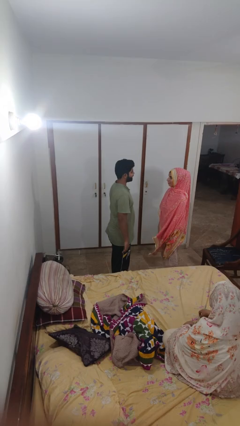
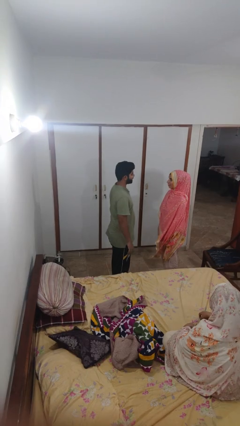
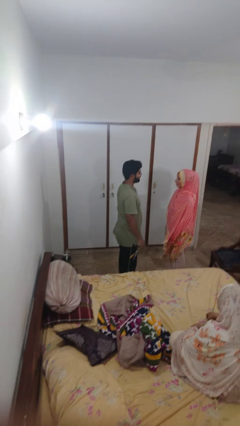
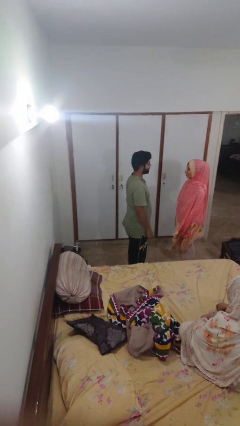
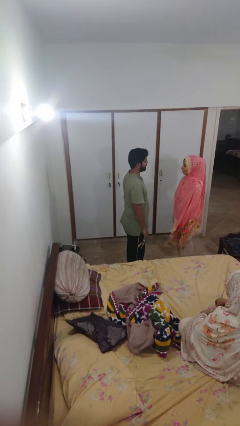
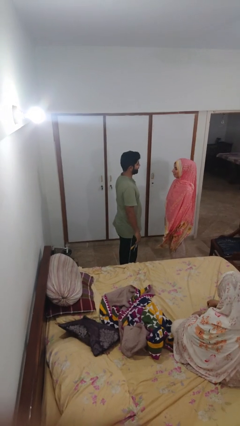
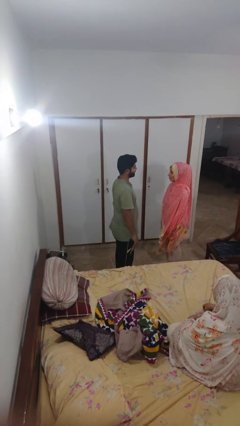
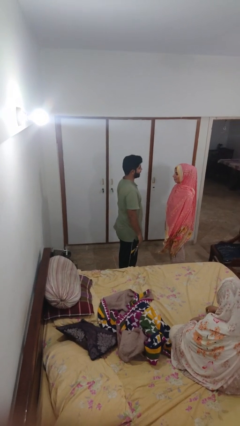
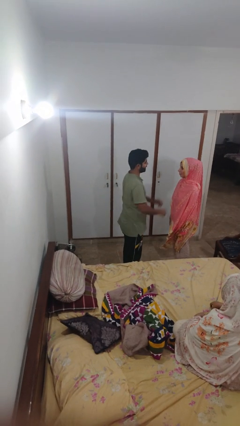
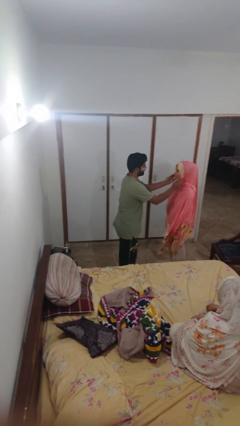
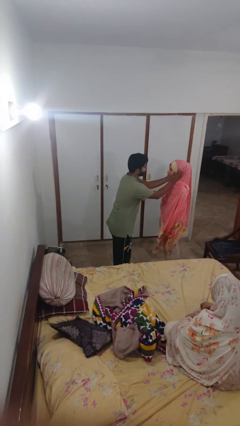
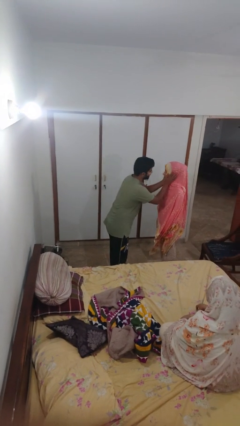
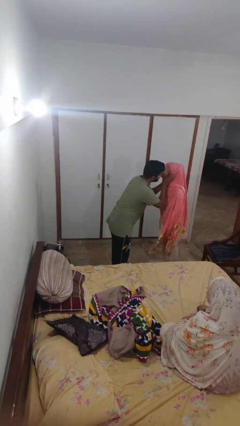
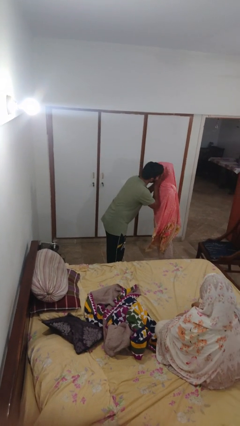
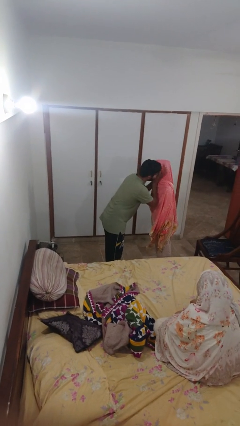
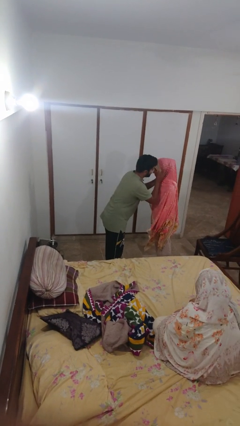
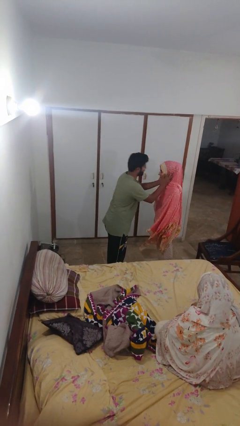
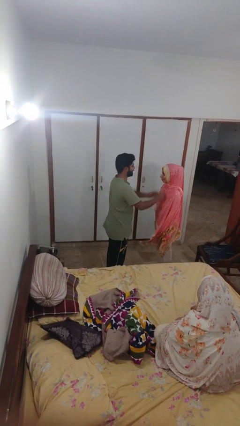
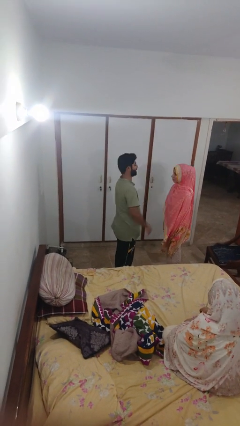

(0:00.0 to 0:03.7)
person kisses cheek of person

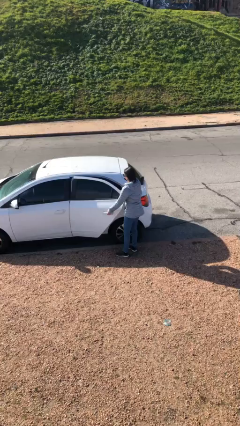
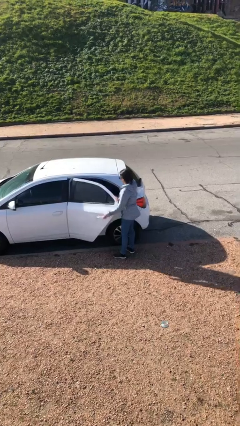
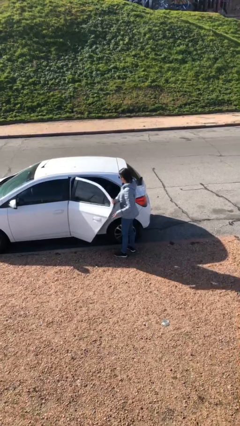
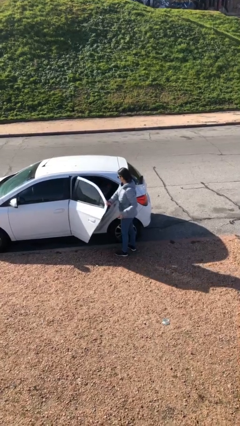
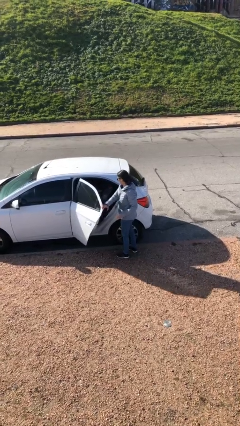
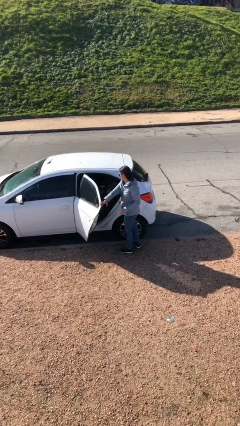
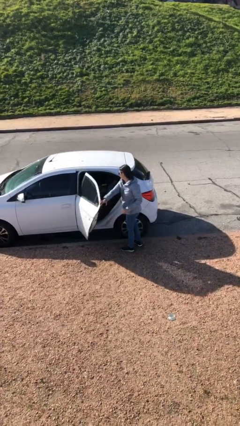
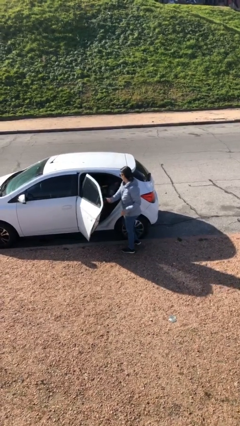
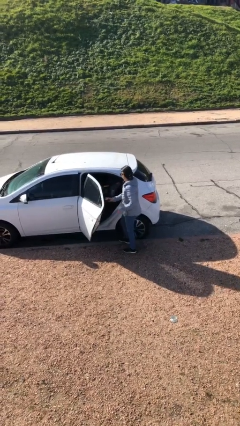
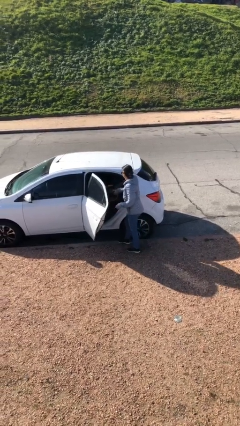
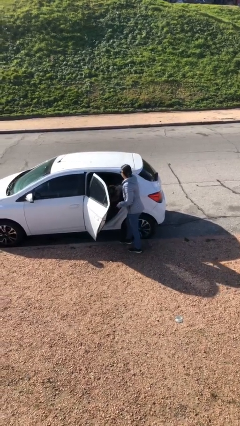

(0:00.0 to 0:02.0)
person opens car door

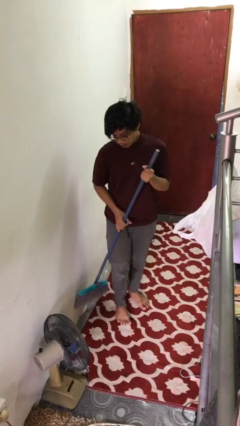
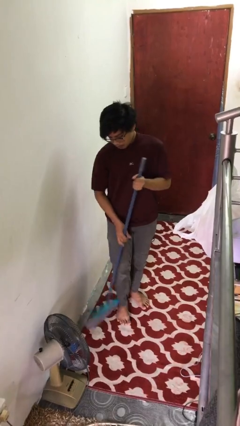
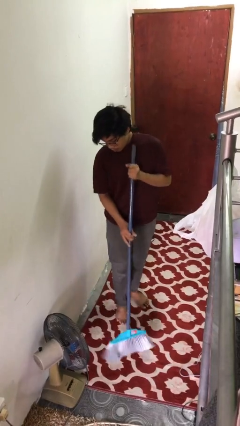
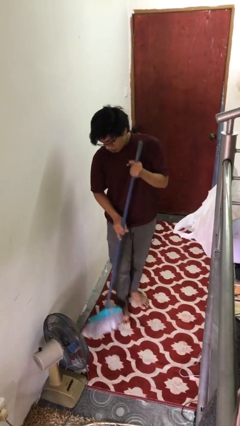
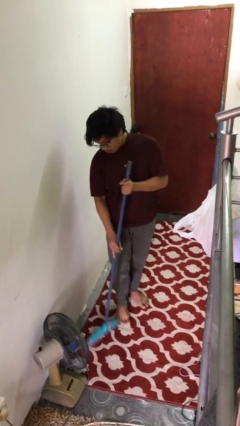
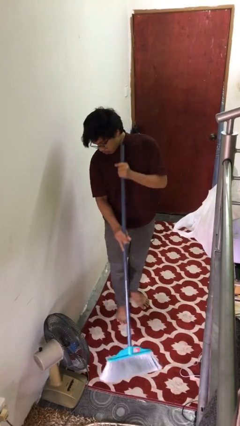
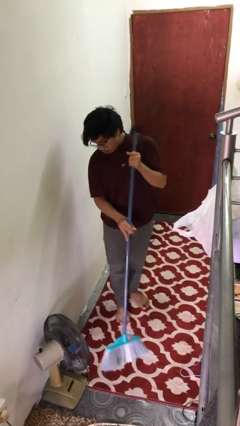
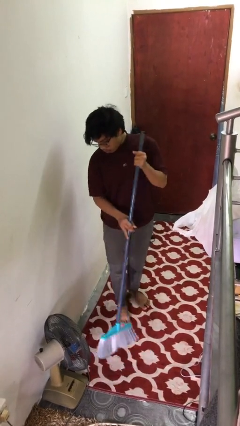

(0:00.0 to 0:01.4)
person sweeps floor

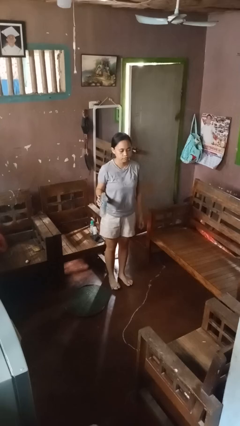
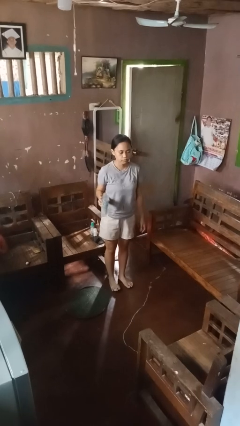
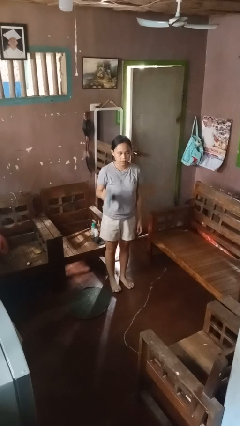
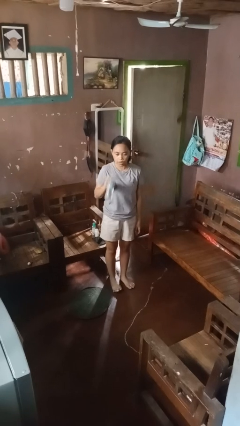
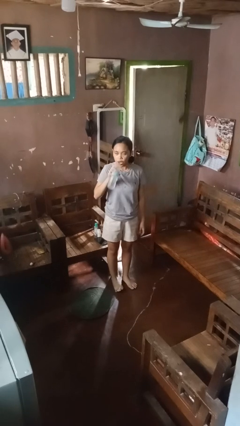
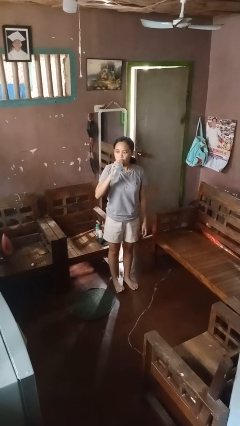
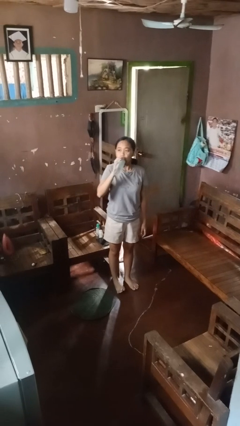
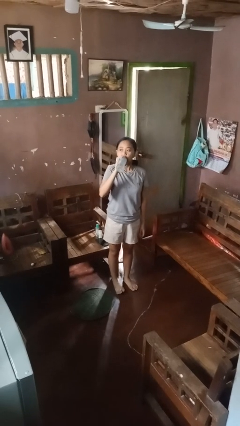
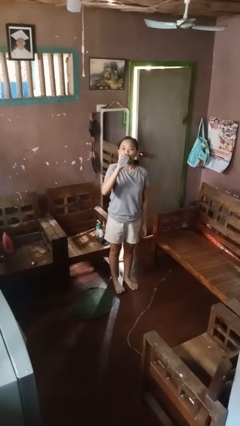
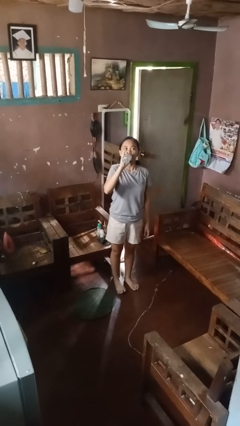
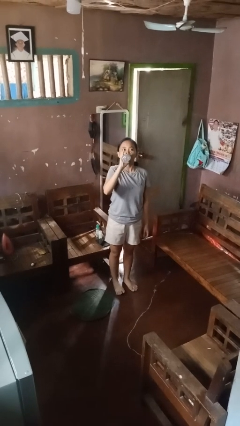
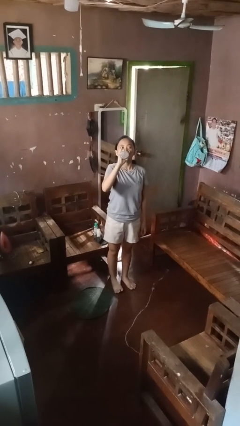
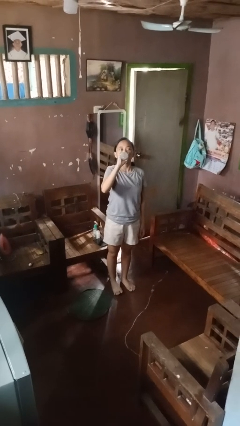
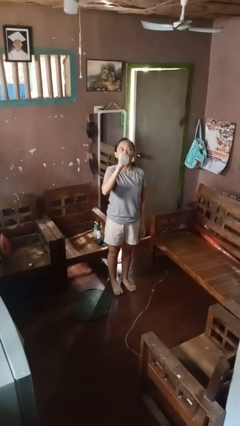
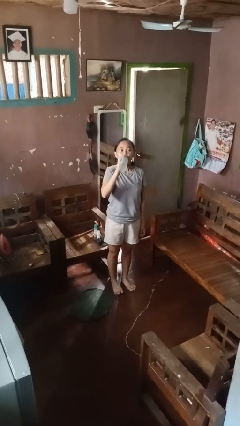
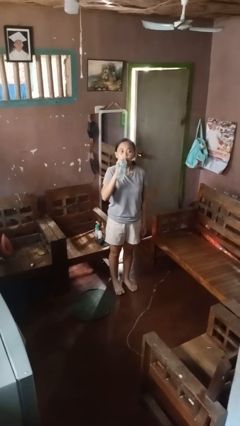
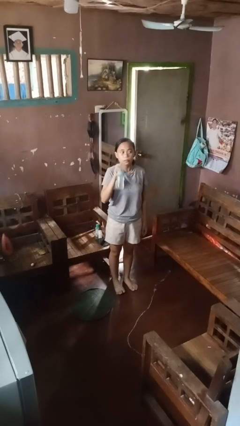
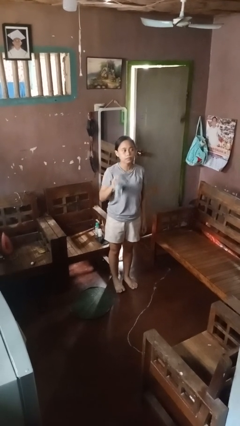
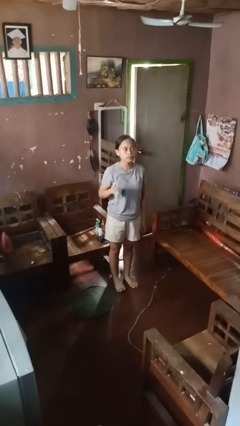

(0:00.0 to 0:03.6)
person drinks from bottle

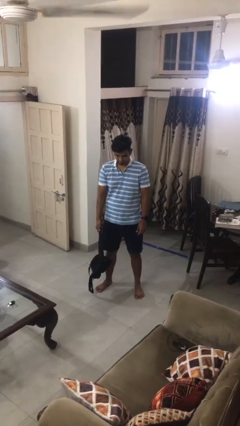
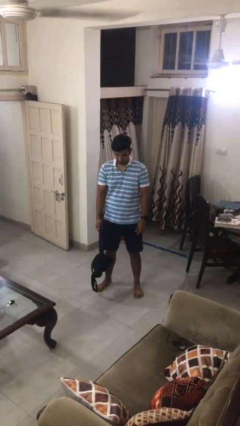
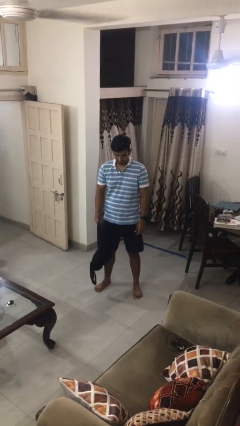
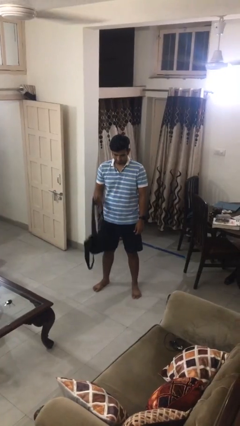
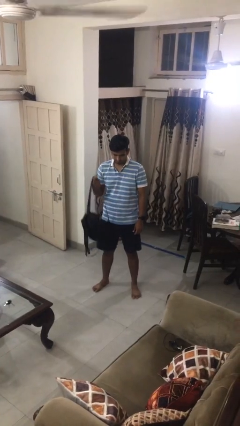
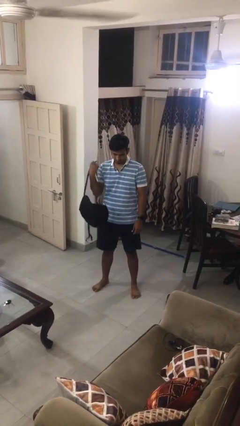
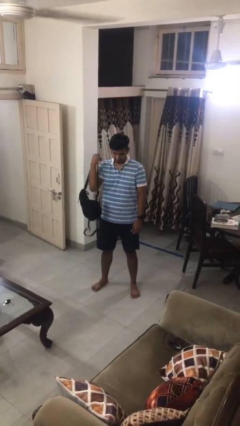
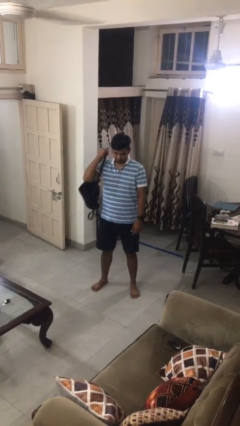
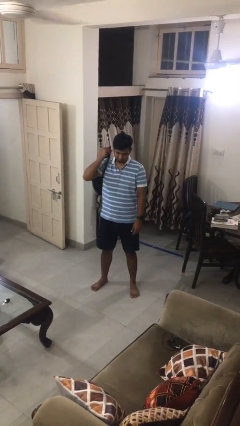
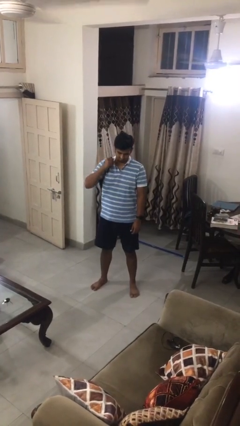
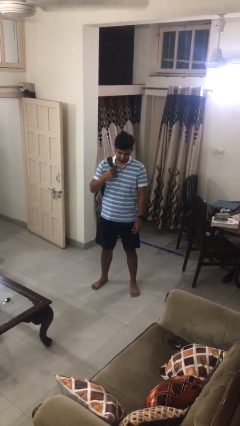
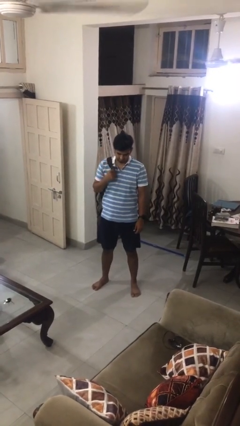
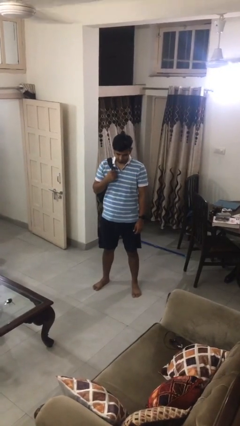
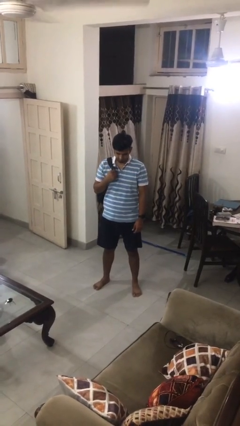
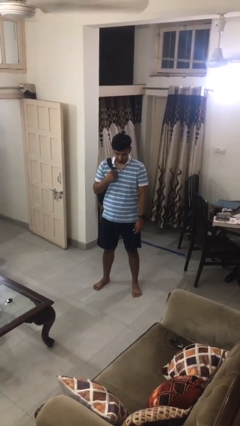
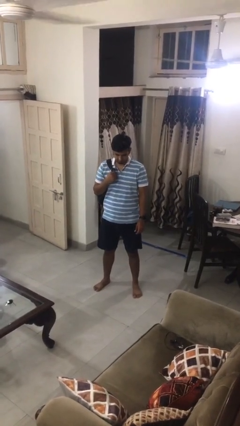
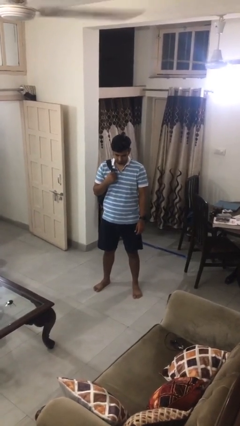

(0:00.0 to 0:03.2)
person puts on backpack

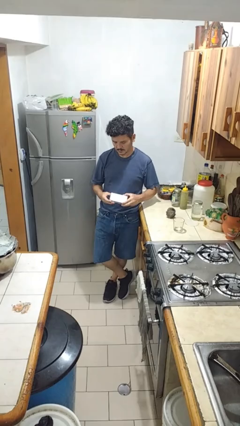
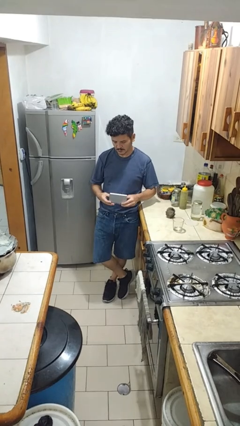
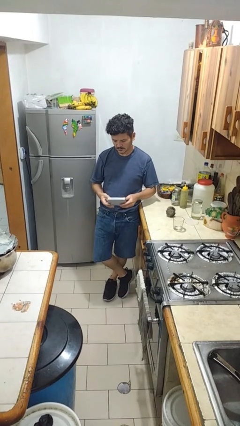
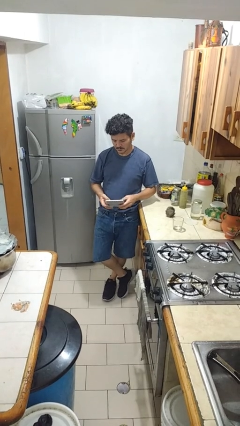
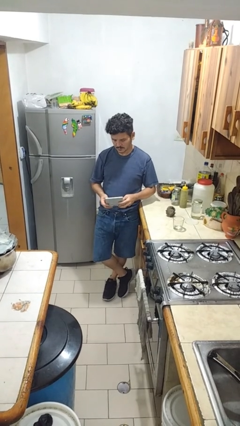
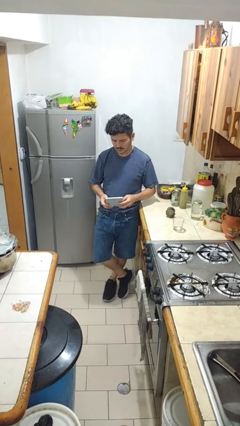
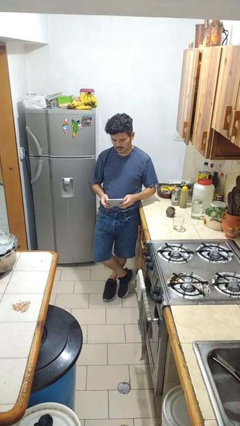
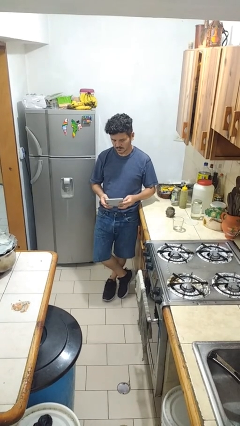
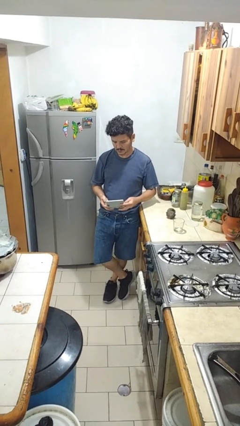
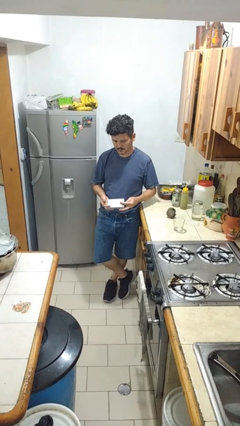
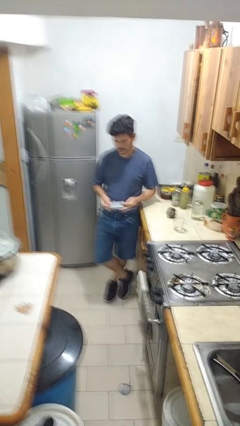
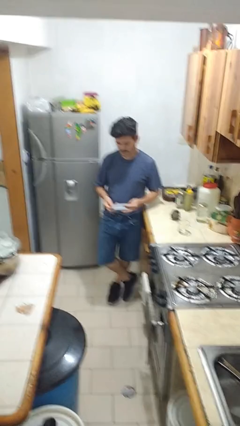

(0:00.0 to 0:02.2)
person interacts with handheld game

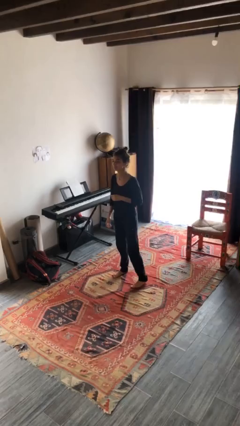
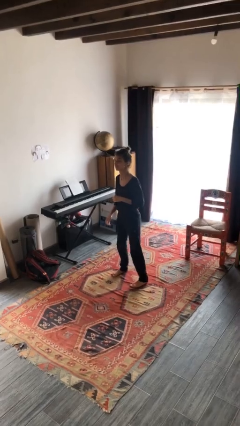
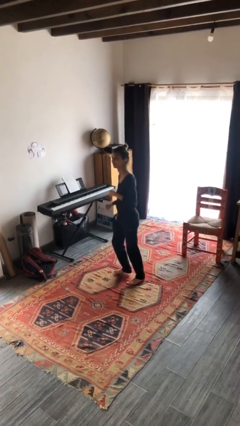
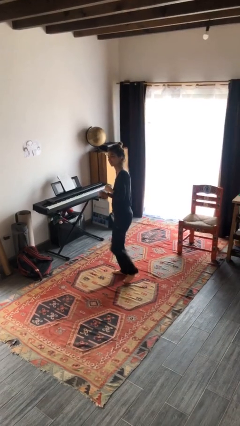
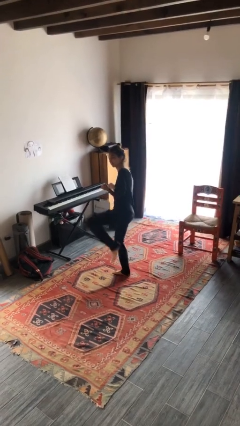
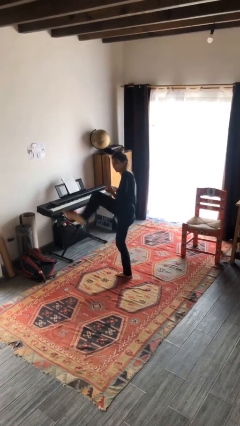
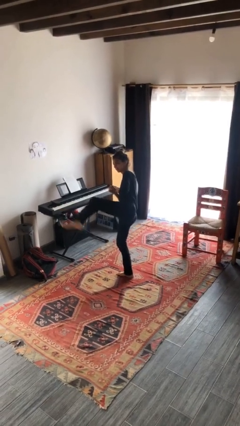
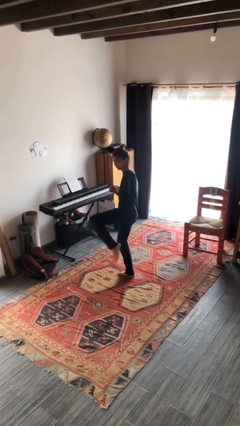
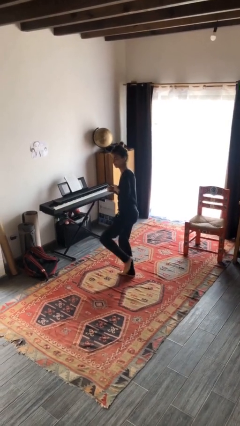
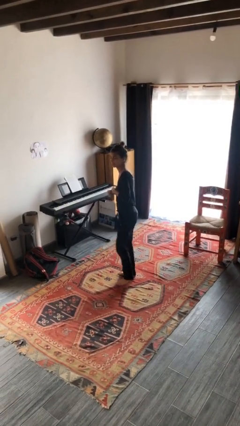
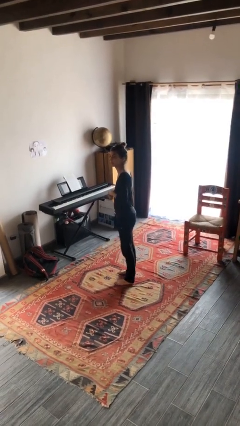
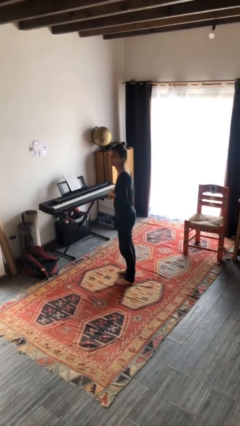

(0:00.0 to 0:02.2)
person karate kicks
